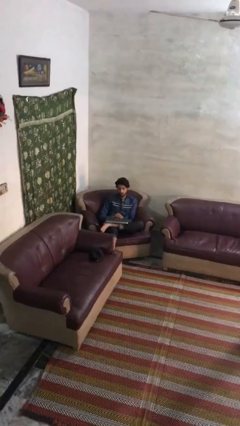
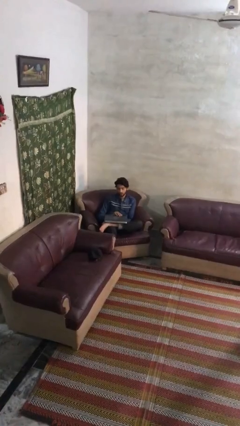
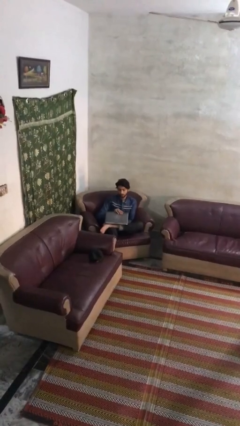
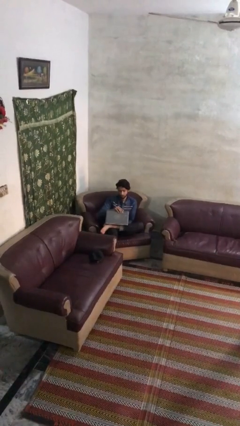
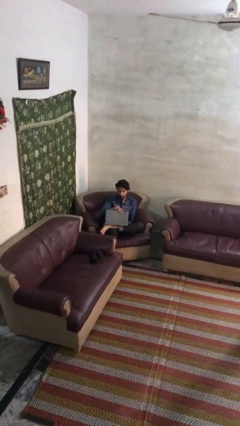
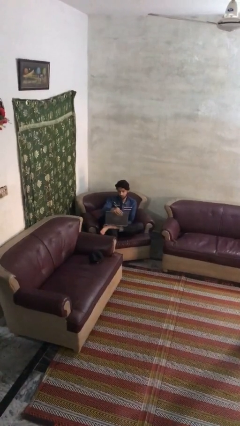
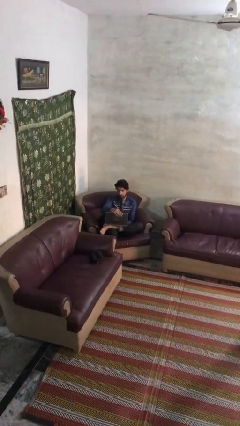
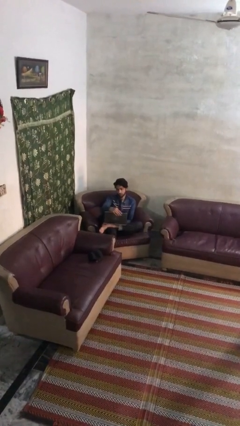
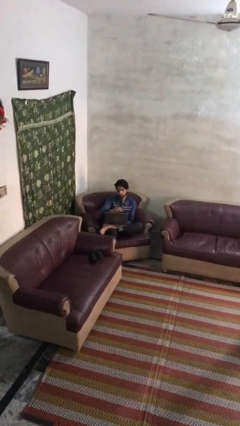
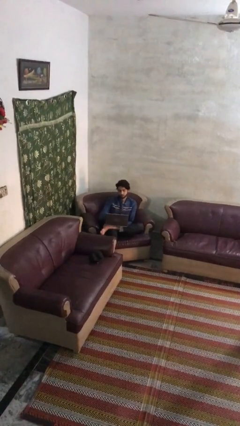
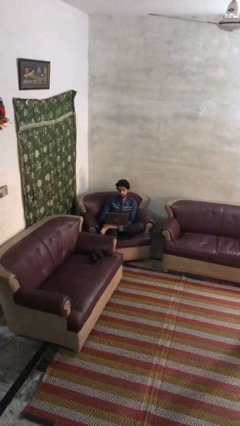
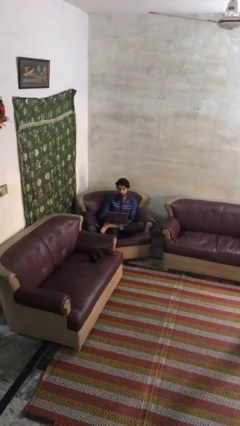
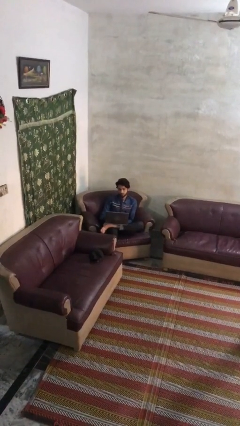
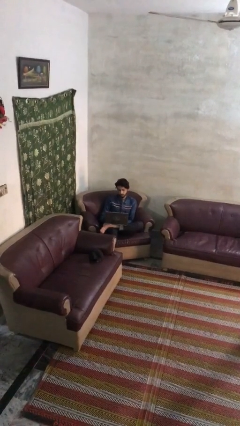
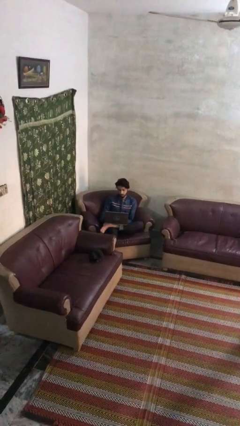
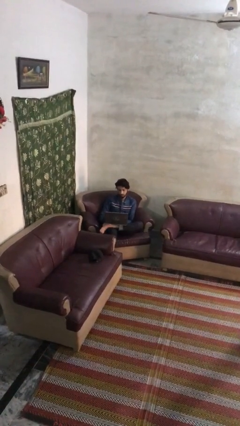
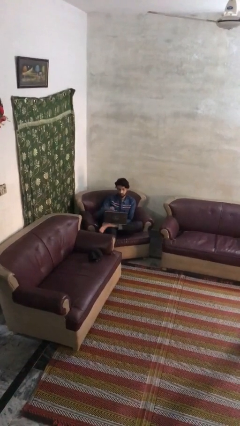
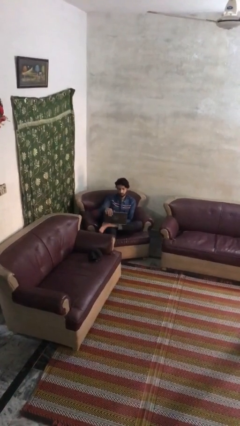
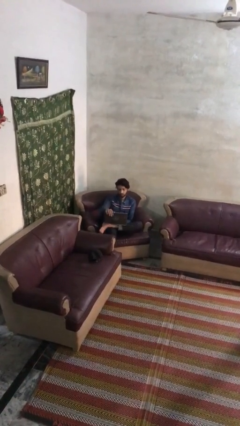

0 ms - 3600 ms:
person interacts with laptop

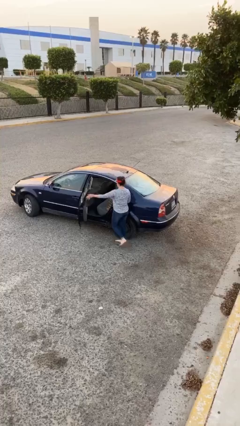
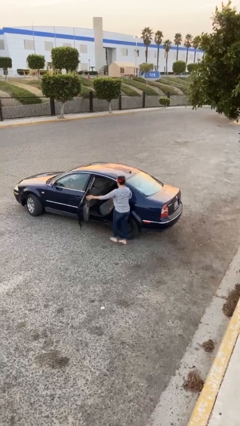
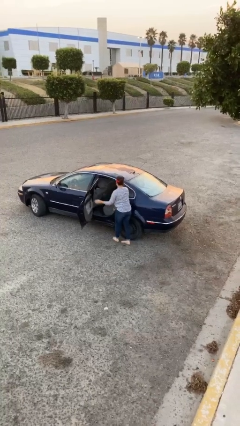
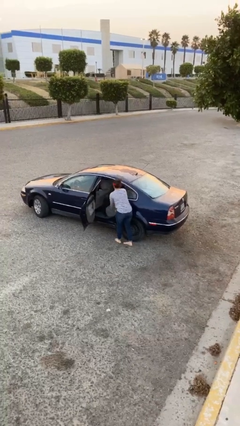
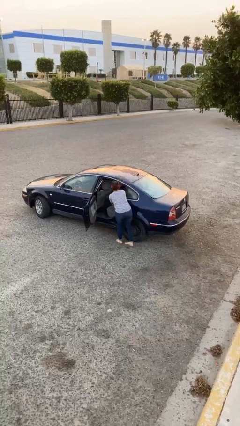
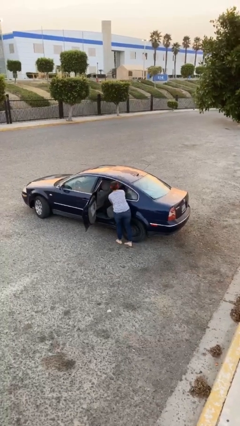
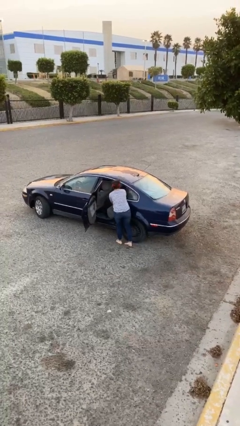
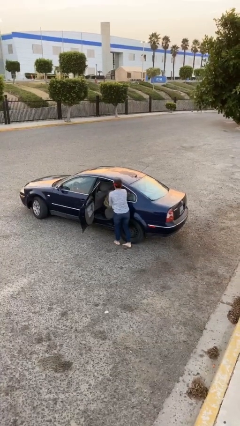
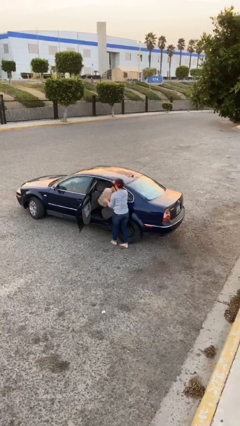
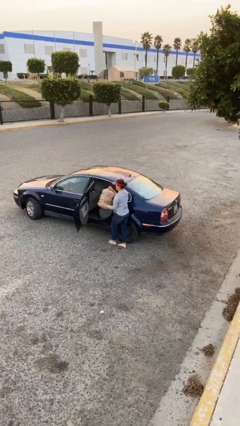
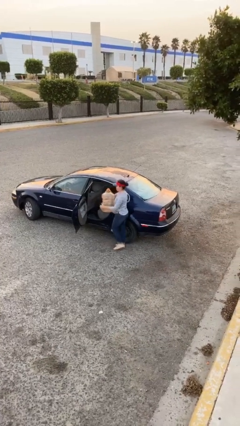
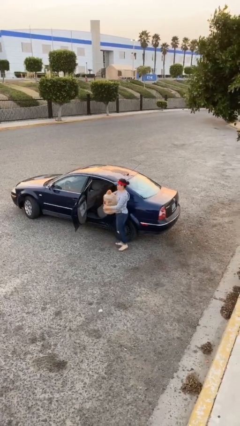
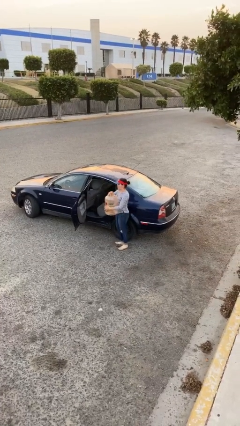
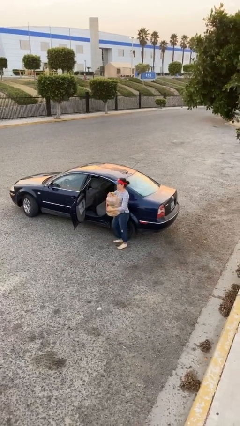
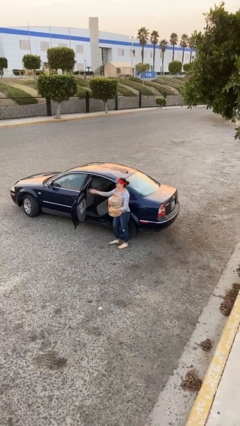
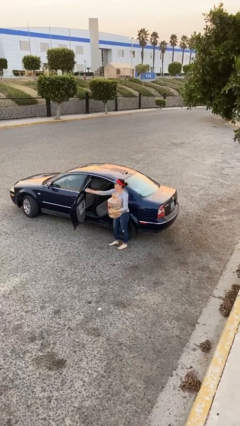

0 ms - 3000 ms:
person unloads car

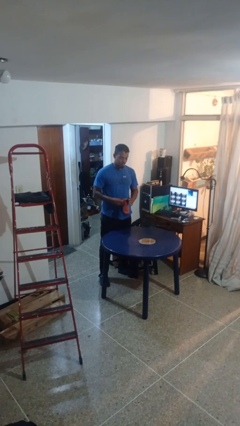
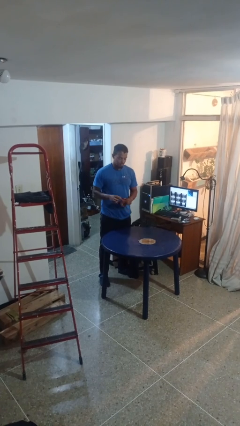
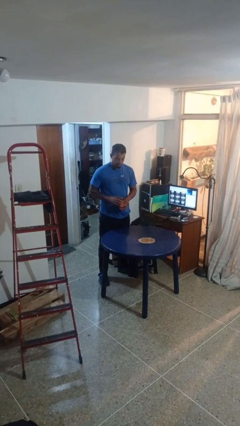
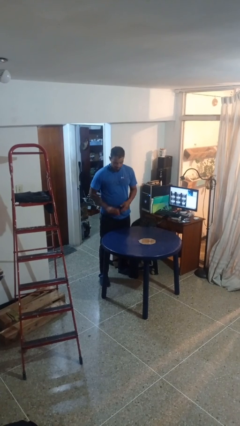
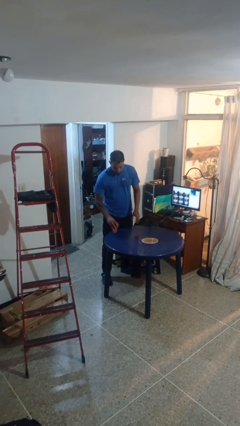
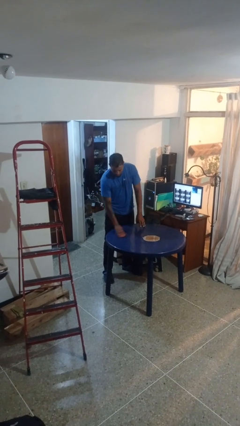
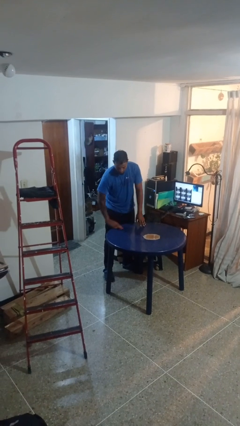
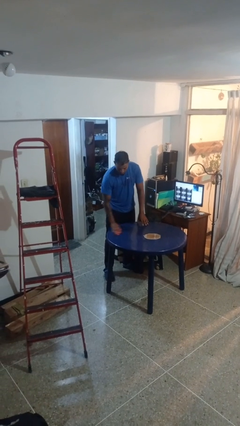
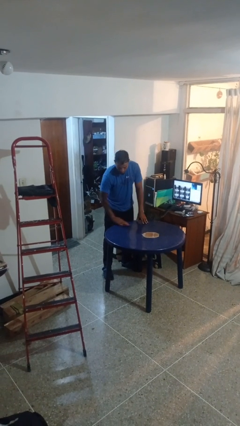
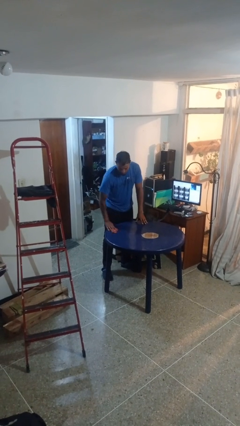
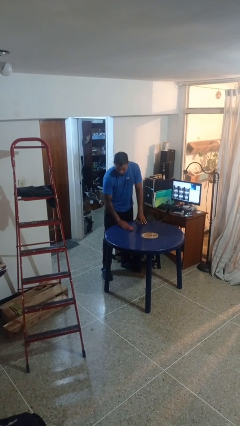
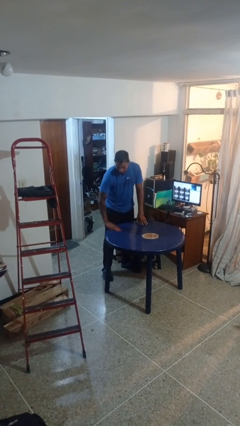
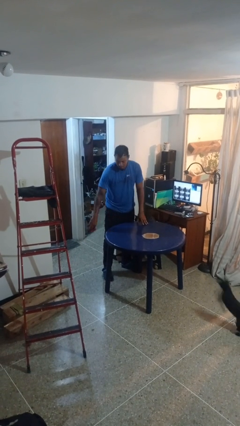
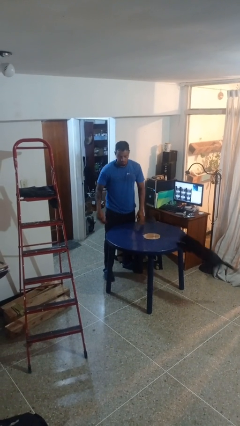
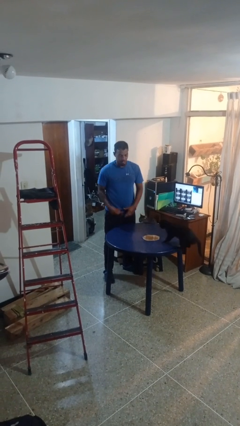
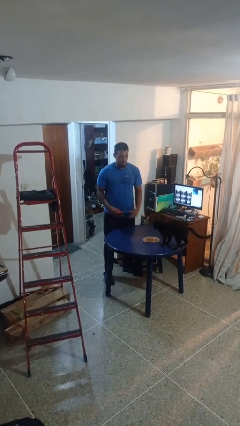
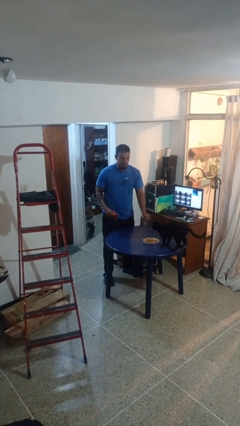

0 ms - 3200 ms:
person cleans table with rag

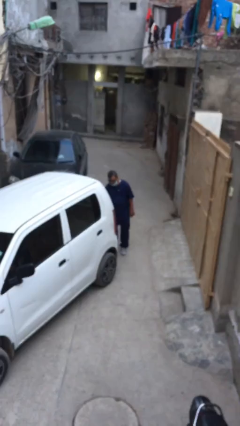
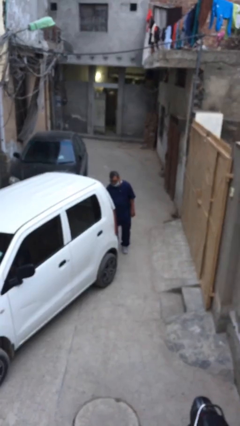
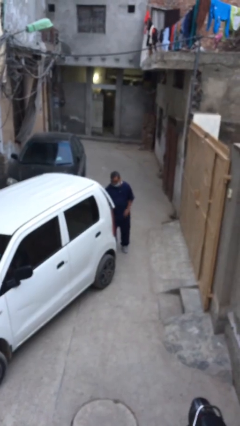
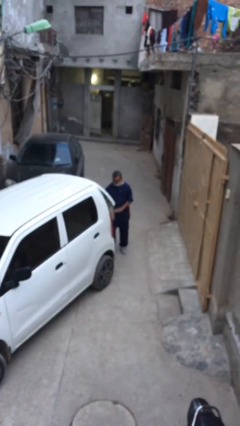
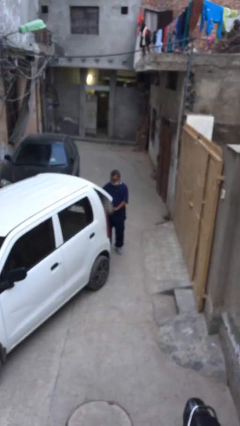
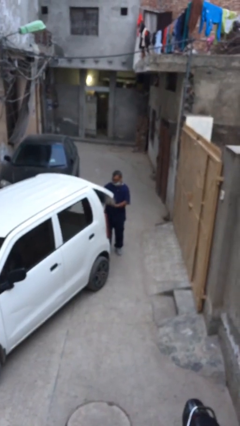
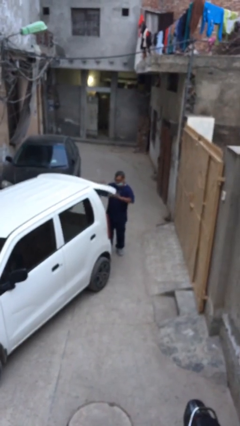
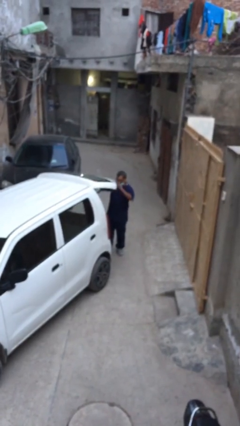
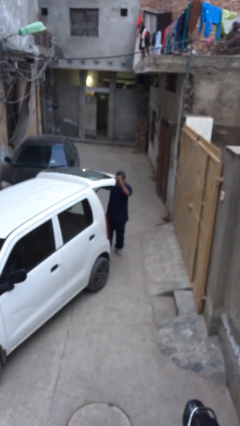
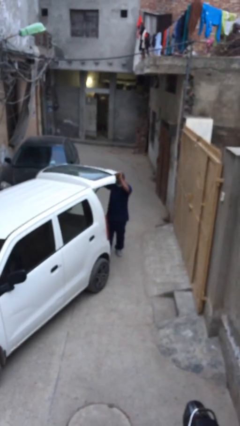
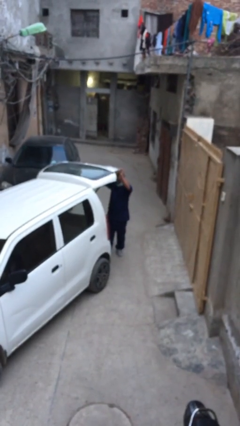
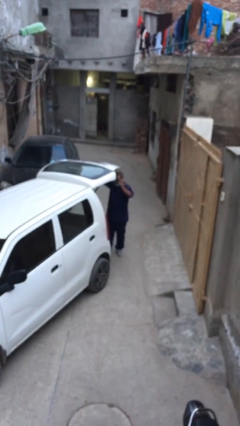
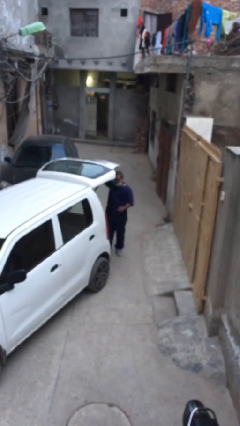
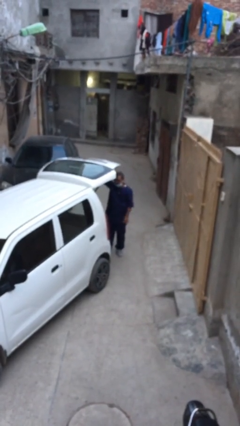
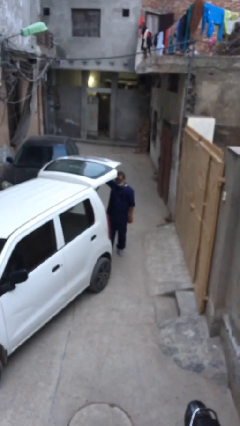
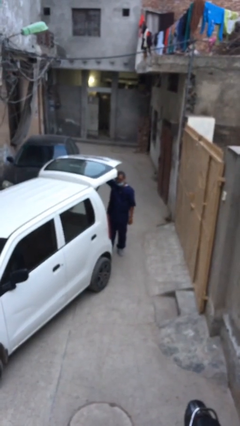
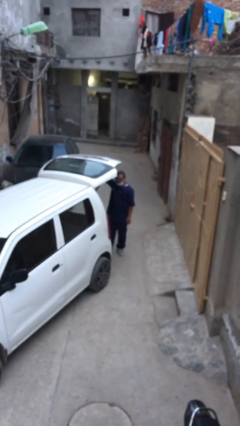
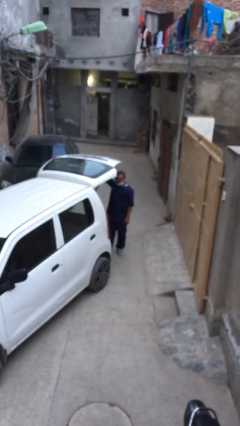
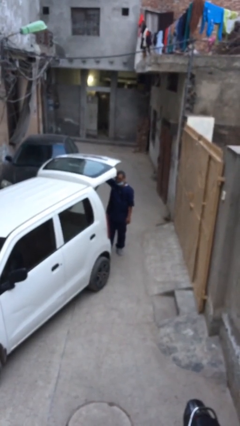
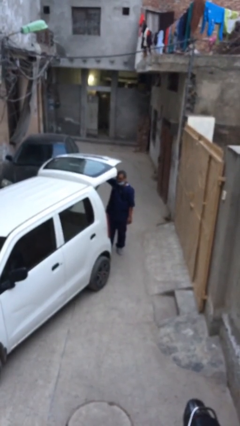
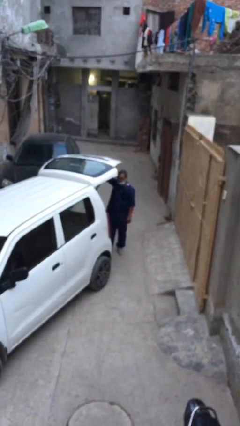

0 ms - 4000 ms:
person opens car trunk

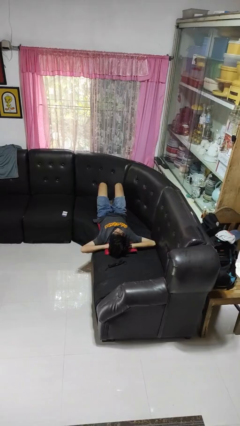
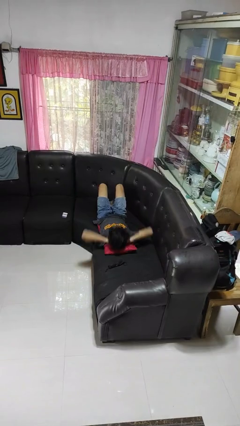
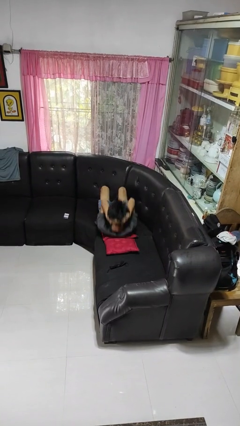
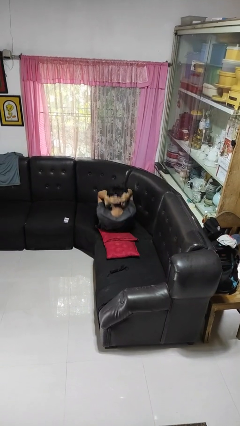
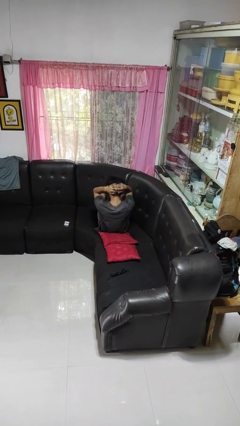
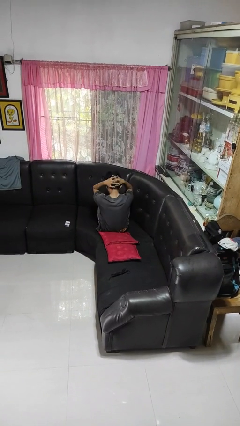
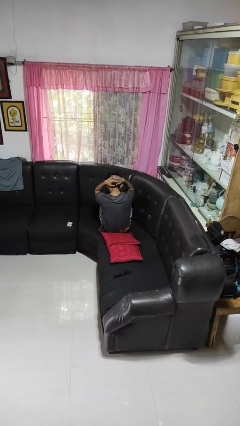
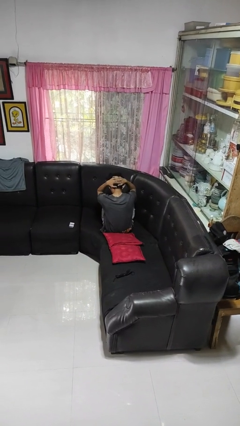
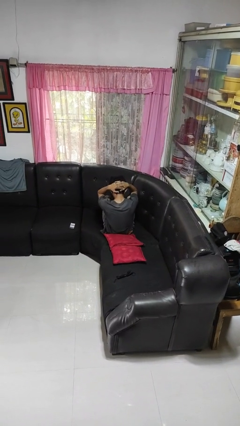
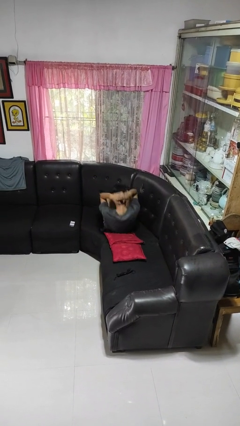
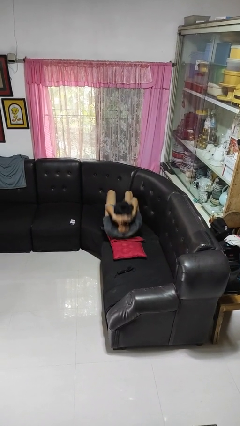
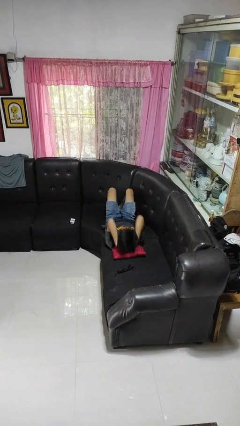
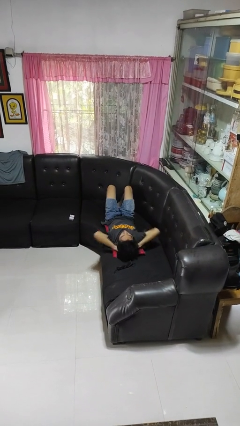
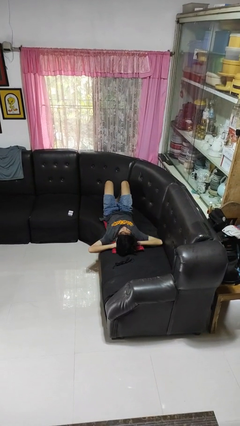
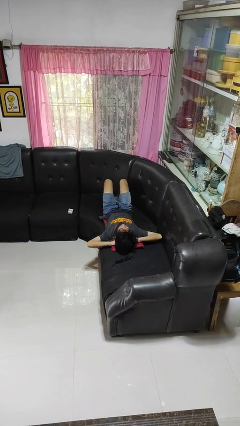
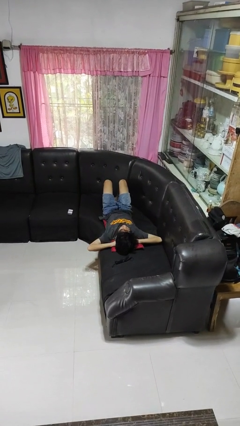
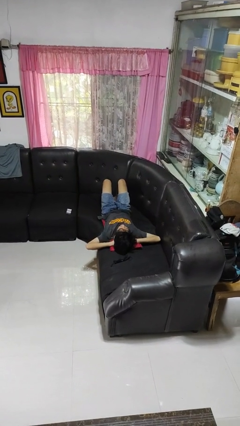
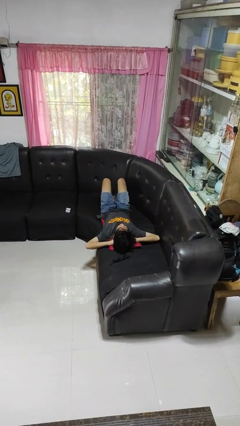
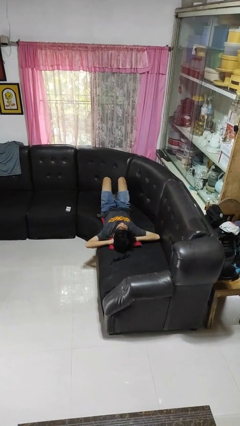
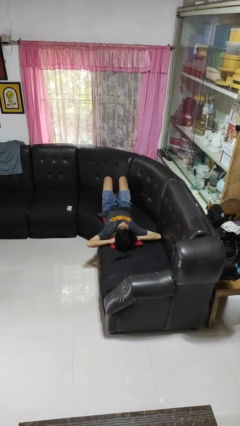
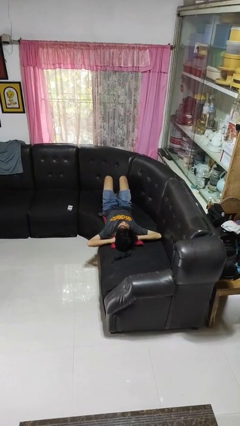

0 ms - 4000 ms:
person exercises with situp
